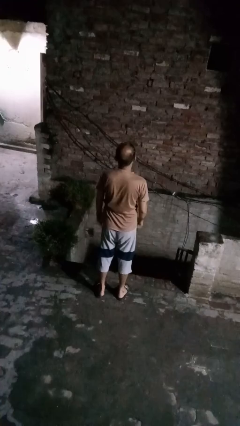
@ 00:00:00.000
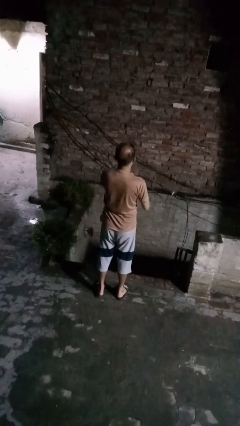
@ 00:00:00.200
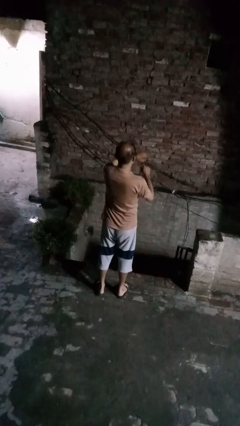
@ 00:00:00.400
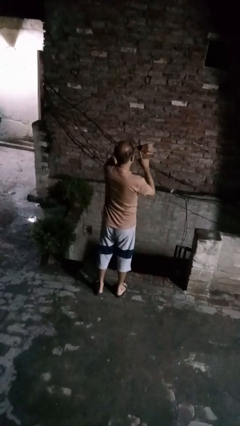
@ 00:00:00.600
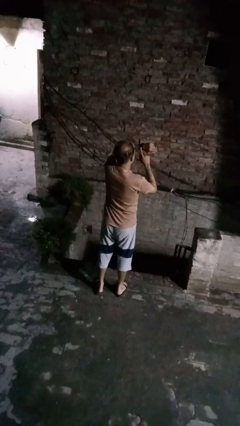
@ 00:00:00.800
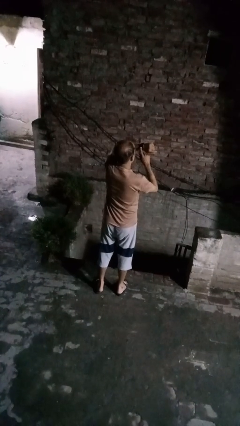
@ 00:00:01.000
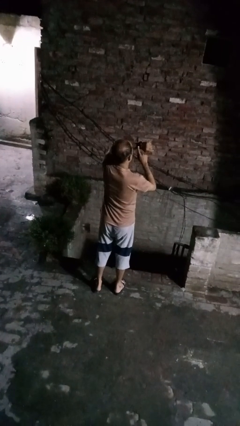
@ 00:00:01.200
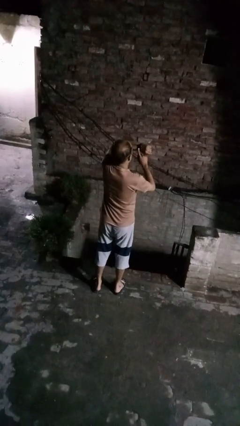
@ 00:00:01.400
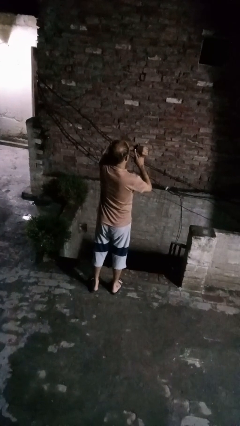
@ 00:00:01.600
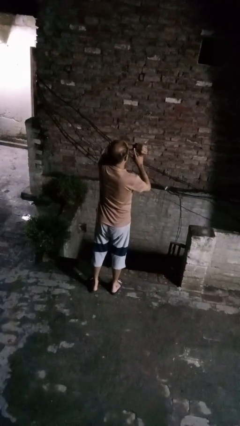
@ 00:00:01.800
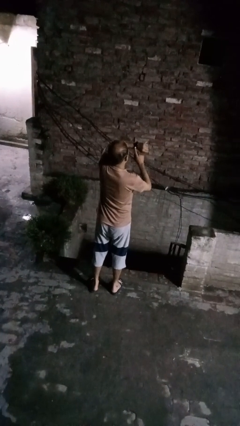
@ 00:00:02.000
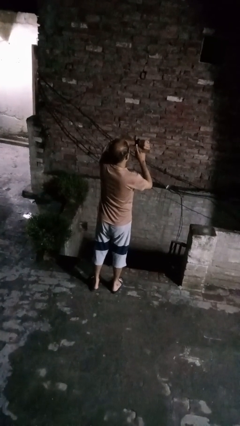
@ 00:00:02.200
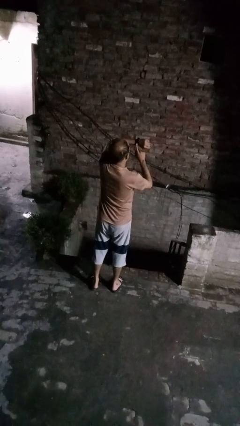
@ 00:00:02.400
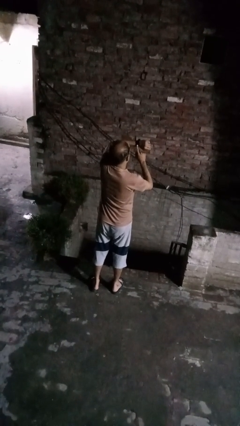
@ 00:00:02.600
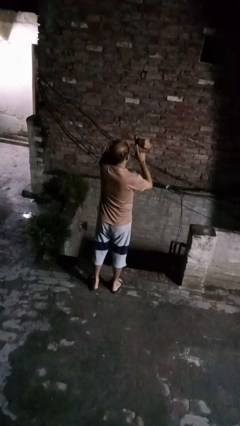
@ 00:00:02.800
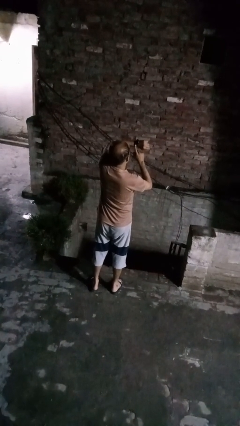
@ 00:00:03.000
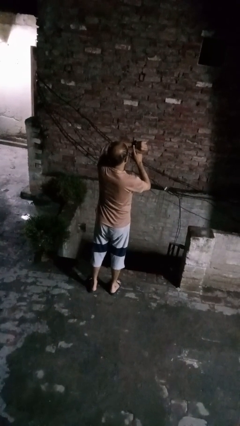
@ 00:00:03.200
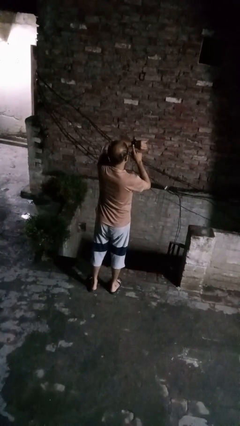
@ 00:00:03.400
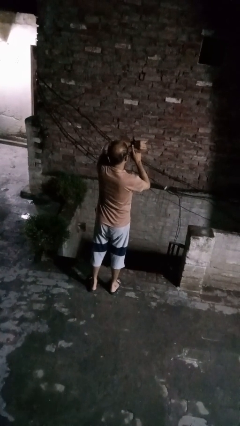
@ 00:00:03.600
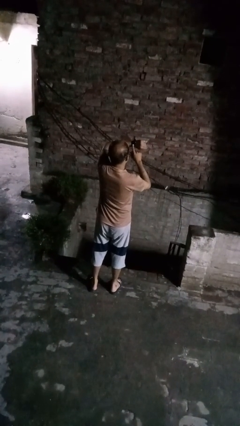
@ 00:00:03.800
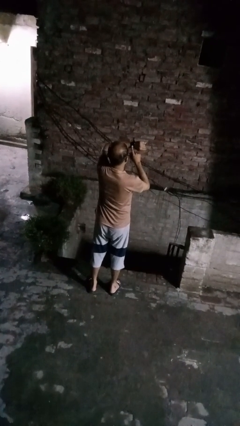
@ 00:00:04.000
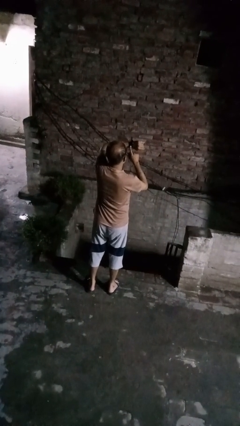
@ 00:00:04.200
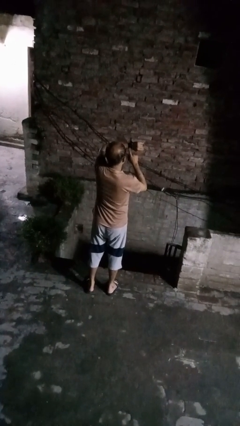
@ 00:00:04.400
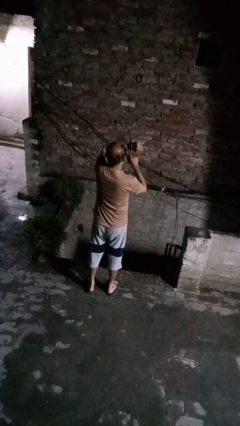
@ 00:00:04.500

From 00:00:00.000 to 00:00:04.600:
person gestures watch closely

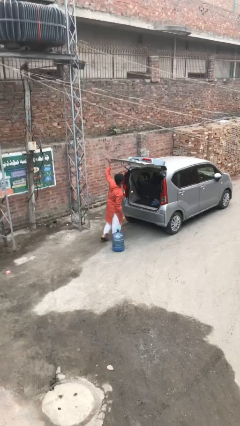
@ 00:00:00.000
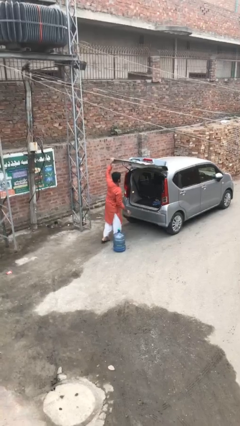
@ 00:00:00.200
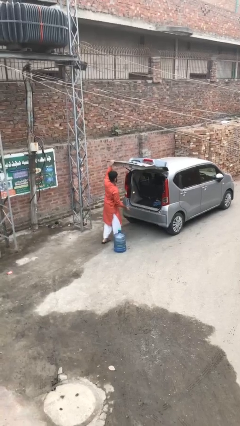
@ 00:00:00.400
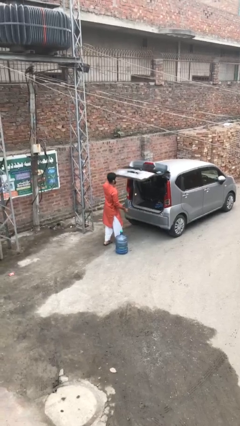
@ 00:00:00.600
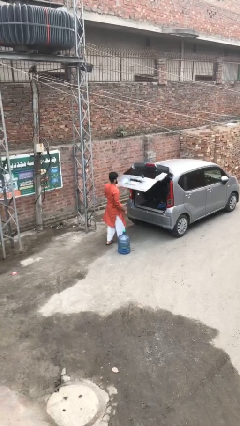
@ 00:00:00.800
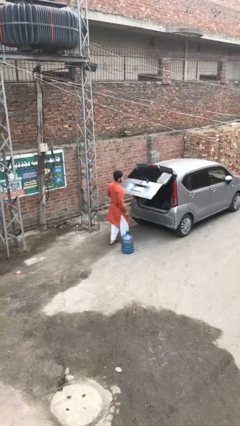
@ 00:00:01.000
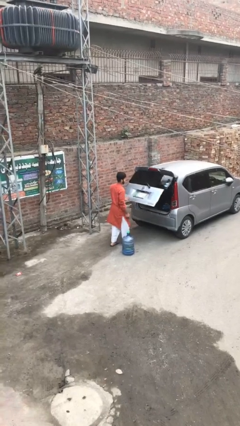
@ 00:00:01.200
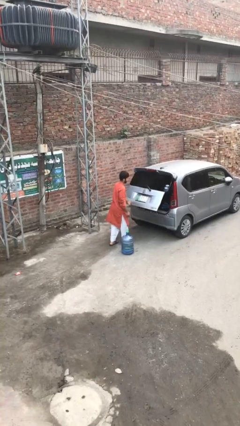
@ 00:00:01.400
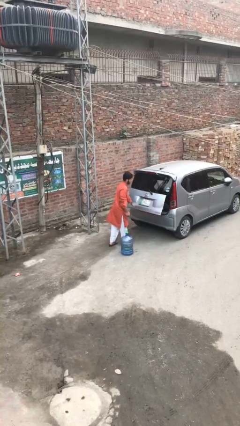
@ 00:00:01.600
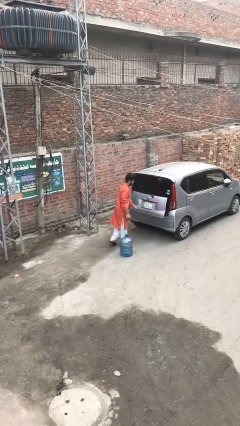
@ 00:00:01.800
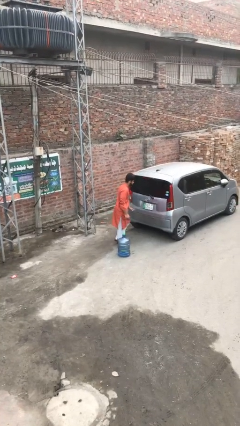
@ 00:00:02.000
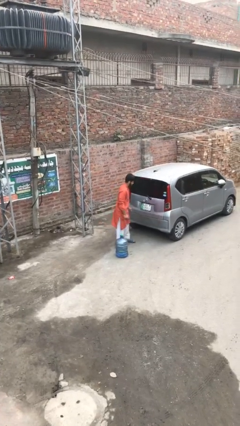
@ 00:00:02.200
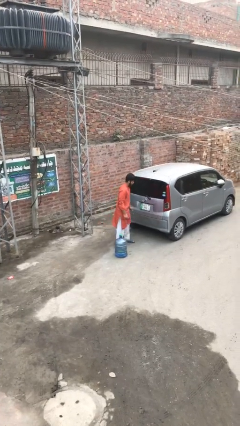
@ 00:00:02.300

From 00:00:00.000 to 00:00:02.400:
person closes car trunk

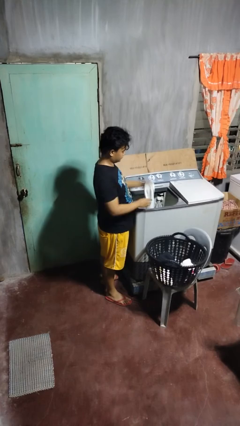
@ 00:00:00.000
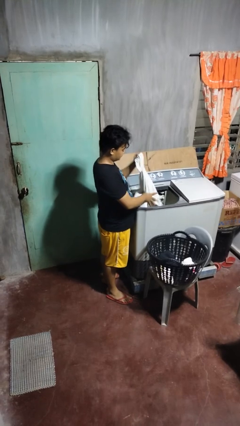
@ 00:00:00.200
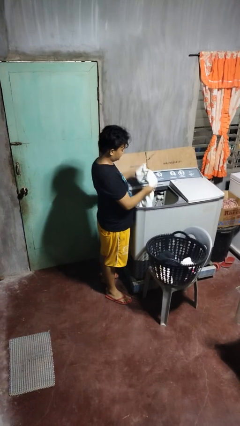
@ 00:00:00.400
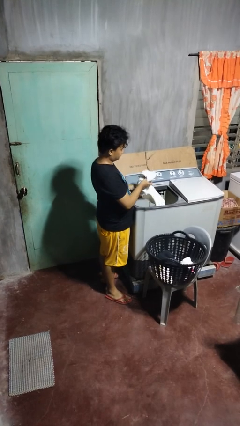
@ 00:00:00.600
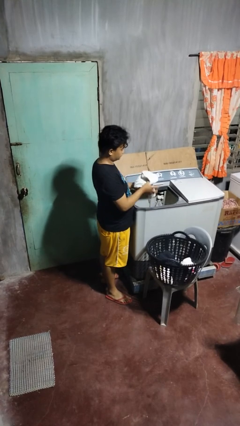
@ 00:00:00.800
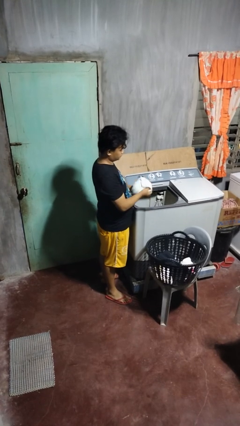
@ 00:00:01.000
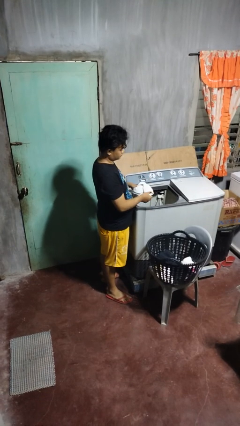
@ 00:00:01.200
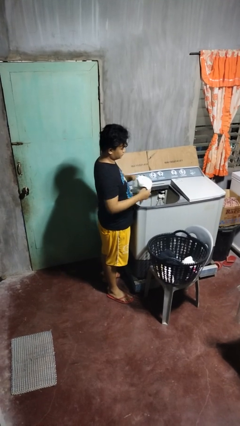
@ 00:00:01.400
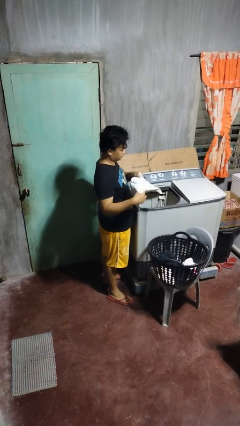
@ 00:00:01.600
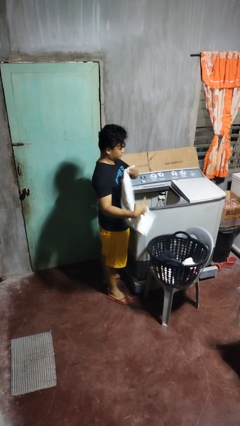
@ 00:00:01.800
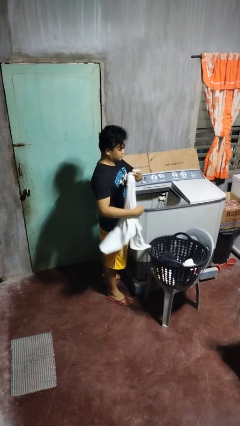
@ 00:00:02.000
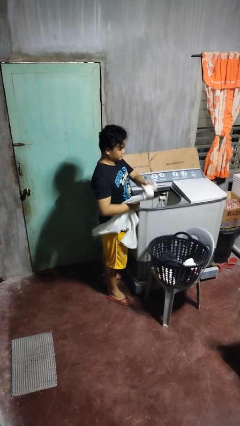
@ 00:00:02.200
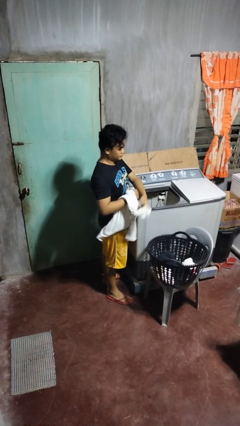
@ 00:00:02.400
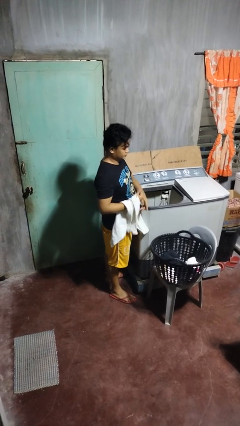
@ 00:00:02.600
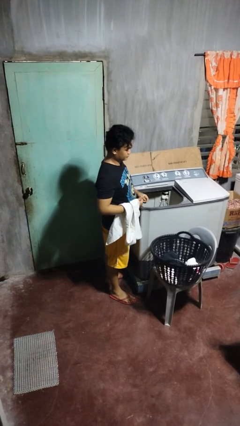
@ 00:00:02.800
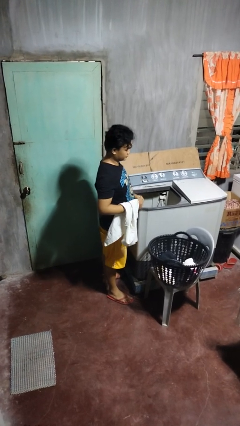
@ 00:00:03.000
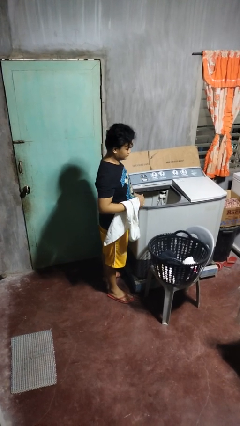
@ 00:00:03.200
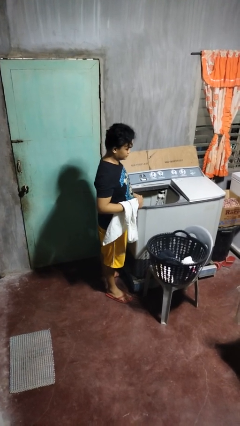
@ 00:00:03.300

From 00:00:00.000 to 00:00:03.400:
person loads clotheswasher

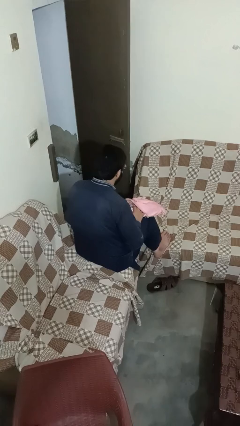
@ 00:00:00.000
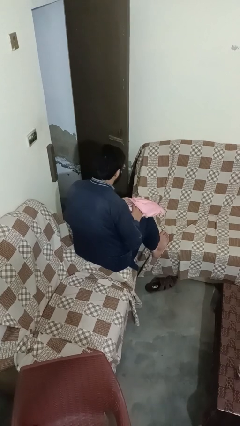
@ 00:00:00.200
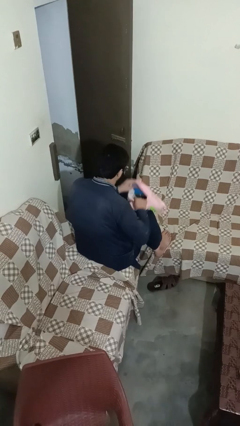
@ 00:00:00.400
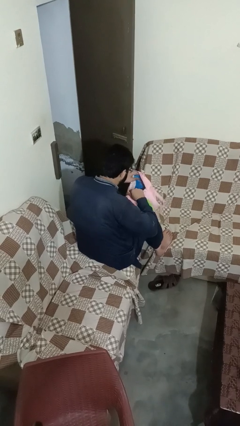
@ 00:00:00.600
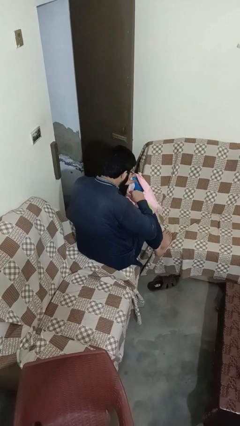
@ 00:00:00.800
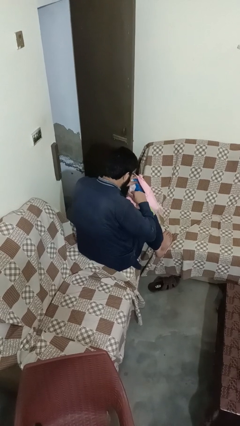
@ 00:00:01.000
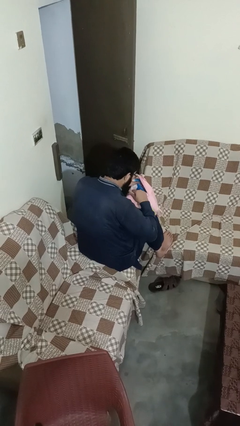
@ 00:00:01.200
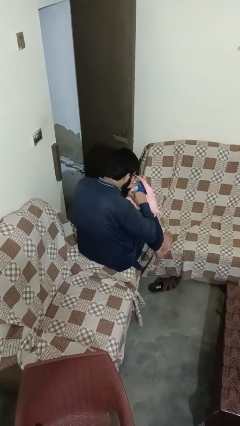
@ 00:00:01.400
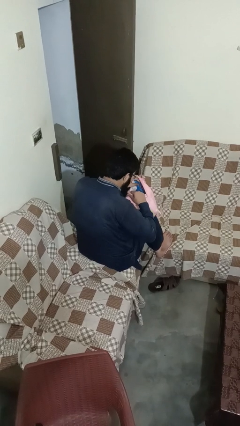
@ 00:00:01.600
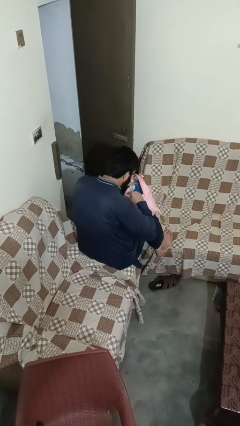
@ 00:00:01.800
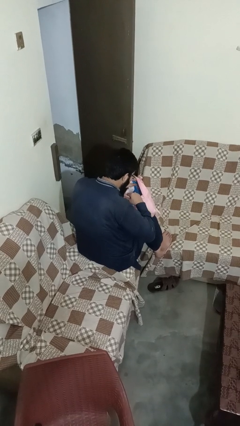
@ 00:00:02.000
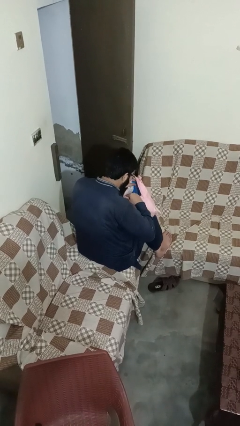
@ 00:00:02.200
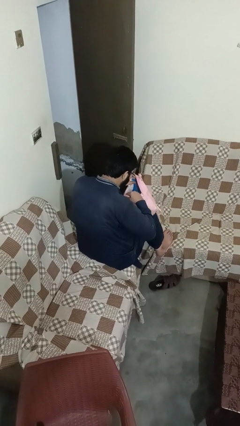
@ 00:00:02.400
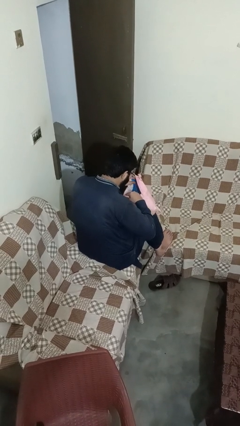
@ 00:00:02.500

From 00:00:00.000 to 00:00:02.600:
person searches in bag

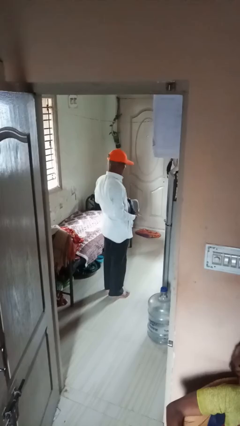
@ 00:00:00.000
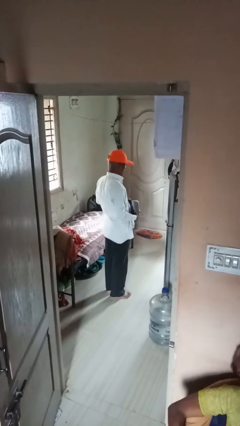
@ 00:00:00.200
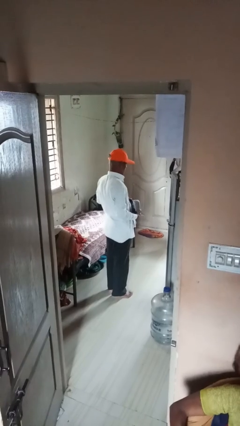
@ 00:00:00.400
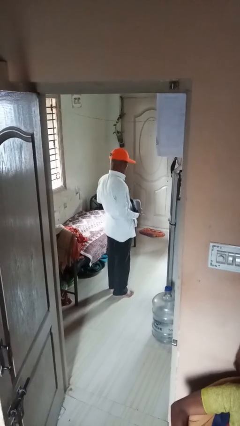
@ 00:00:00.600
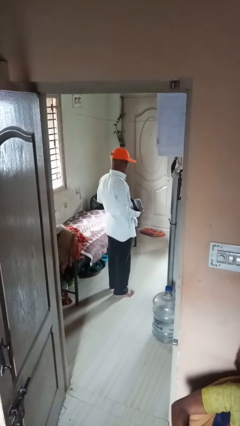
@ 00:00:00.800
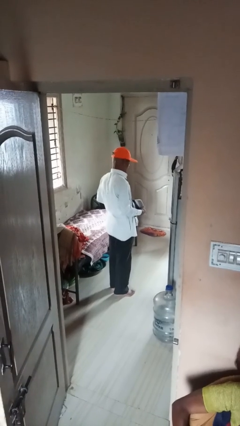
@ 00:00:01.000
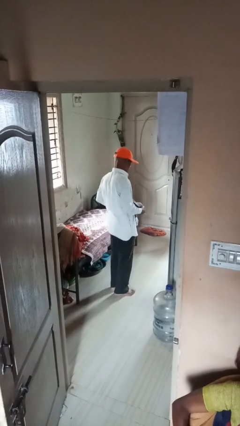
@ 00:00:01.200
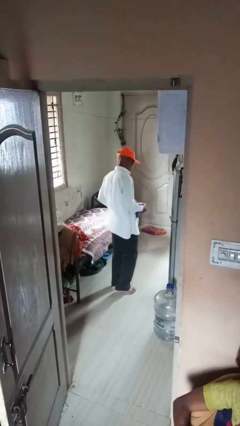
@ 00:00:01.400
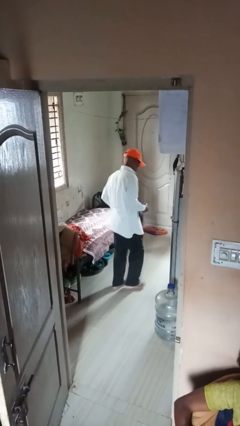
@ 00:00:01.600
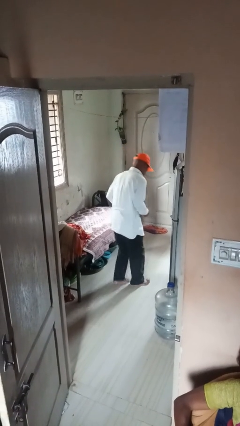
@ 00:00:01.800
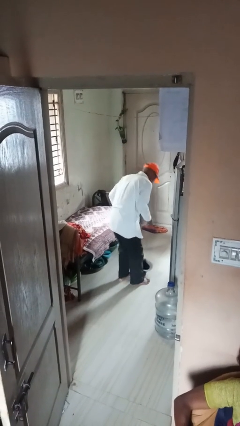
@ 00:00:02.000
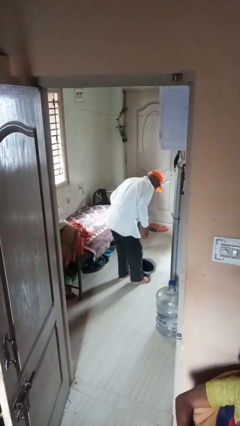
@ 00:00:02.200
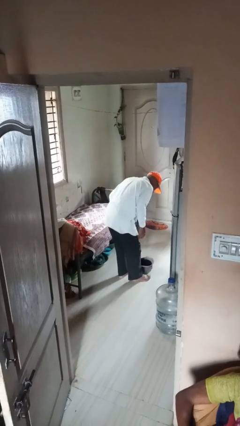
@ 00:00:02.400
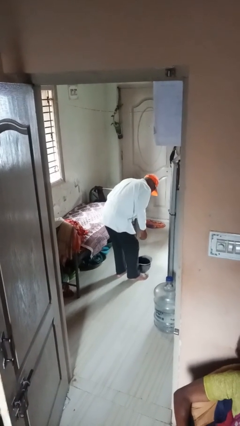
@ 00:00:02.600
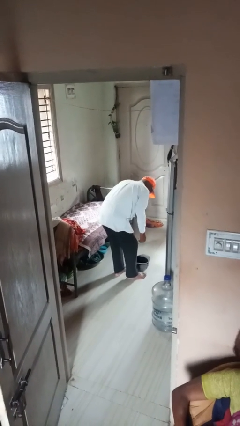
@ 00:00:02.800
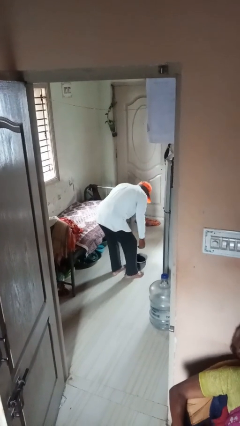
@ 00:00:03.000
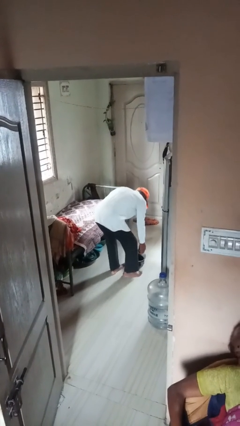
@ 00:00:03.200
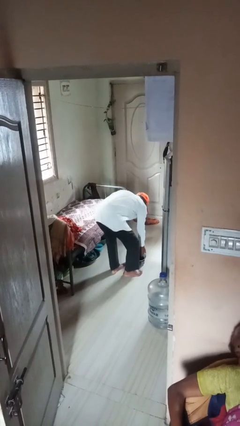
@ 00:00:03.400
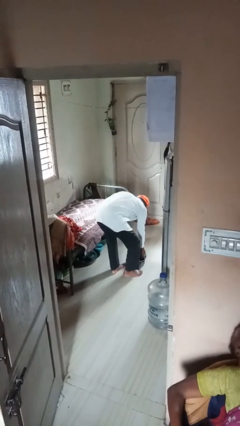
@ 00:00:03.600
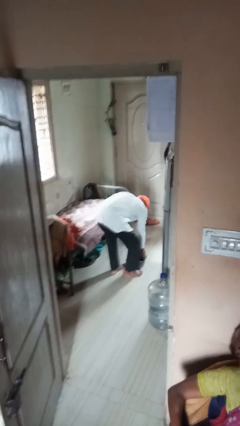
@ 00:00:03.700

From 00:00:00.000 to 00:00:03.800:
person drops object

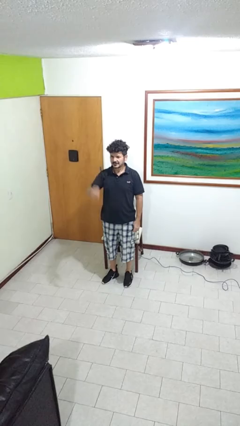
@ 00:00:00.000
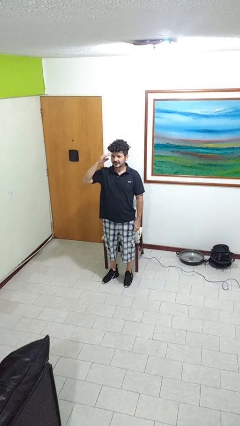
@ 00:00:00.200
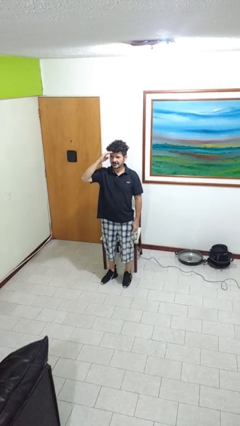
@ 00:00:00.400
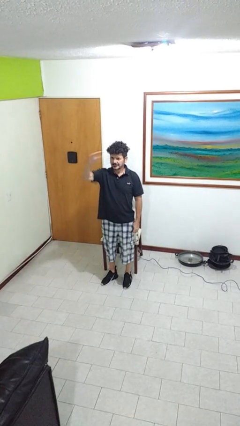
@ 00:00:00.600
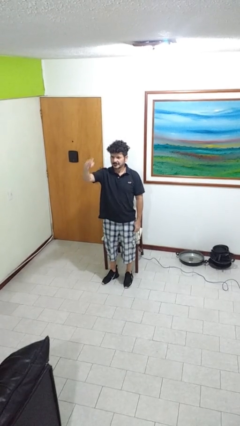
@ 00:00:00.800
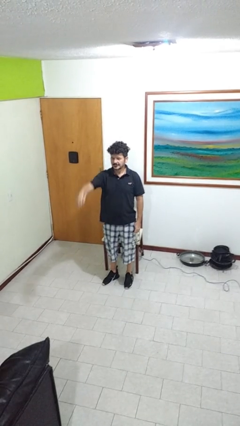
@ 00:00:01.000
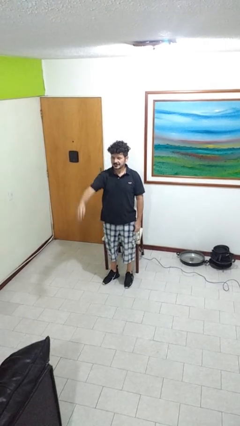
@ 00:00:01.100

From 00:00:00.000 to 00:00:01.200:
person salutes
